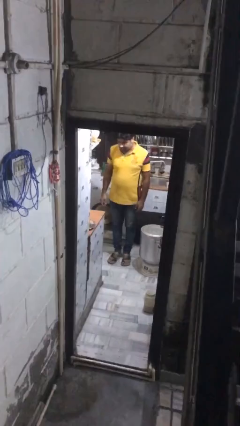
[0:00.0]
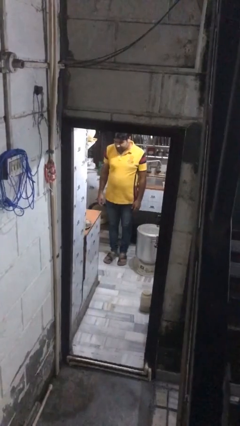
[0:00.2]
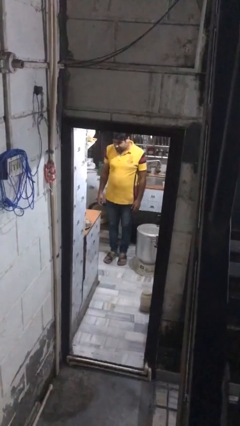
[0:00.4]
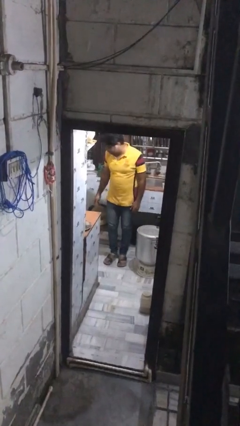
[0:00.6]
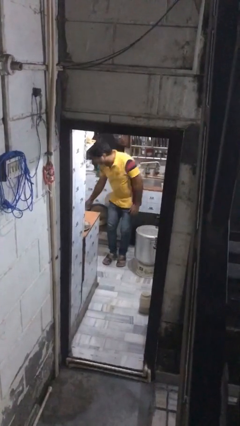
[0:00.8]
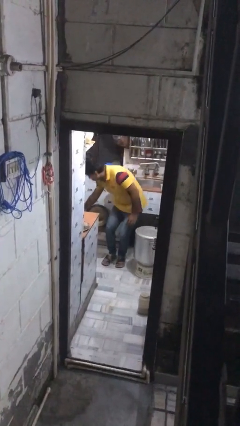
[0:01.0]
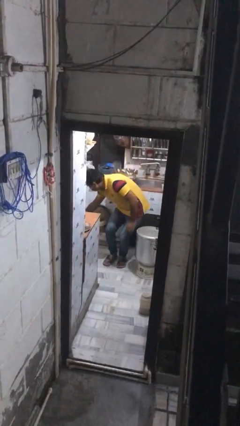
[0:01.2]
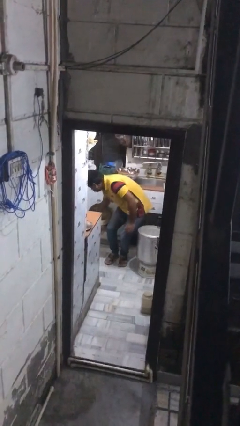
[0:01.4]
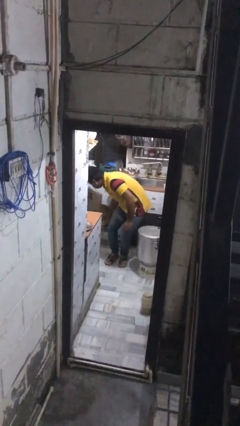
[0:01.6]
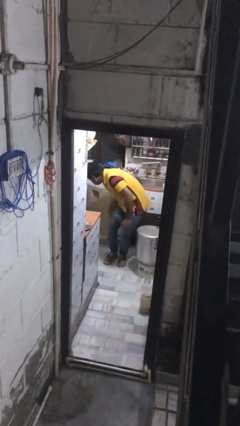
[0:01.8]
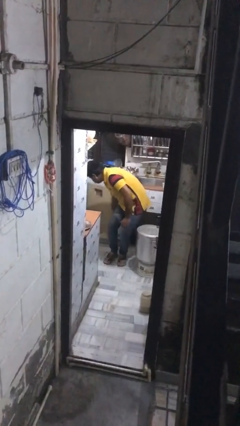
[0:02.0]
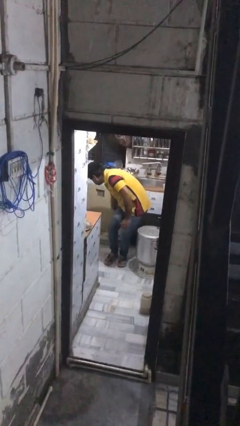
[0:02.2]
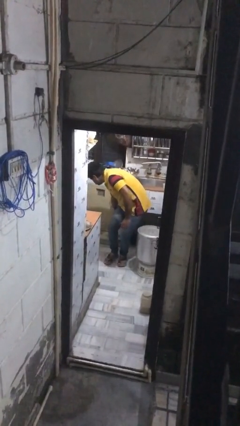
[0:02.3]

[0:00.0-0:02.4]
person opens kitchen drawer

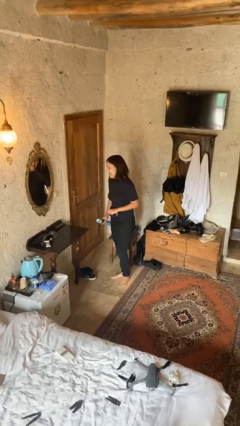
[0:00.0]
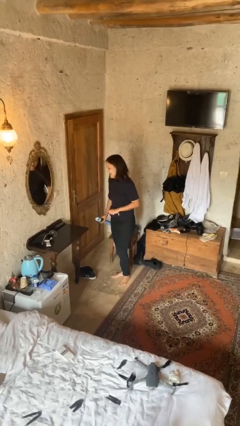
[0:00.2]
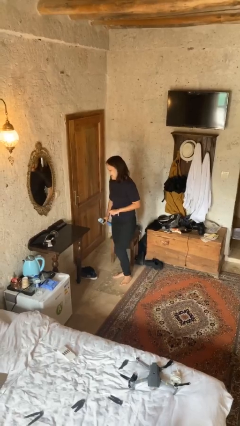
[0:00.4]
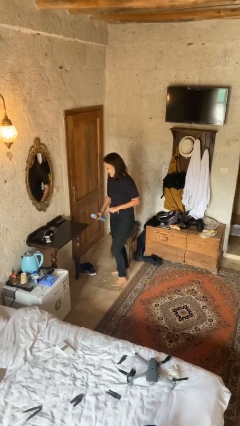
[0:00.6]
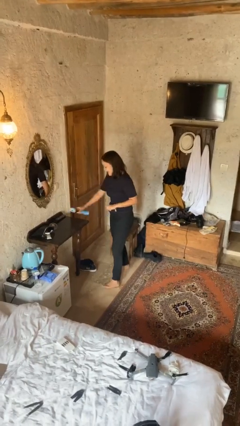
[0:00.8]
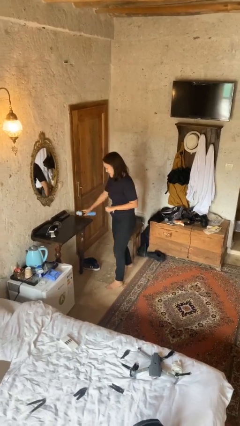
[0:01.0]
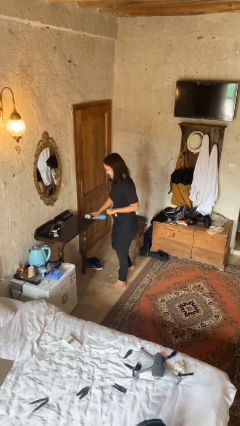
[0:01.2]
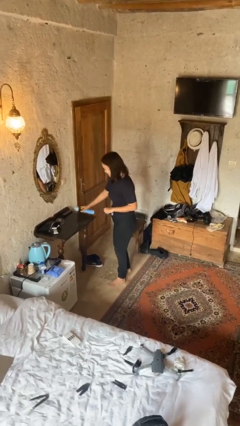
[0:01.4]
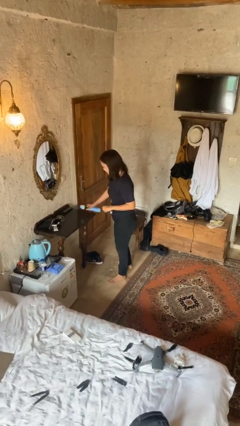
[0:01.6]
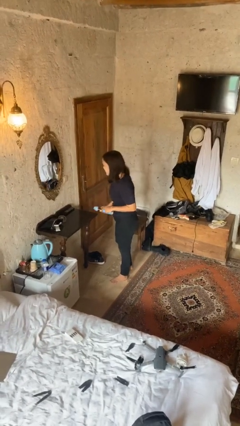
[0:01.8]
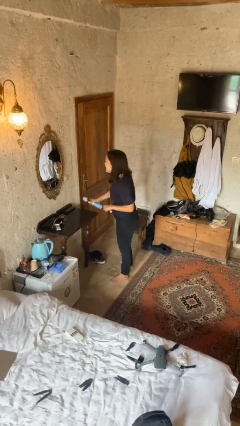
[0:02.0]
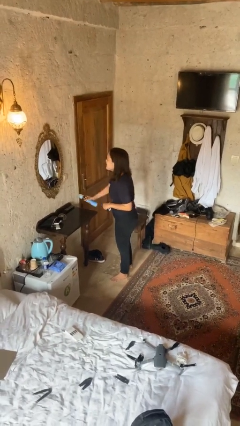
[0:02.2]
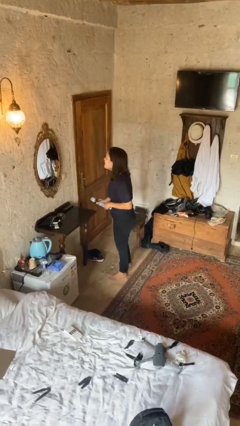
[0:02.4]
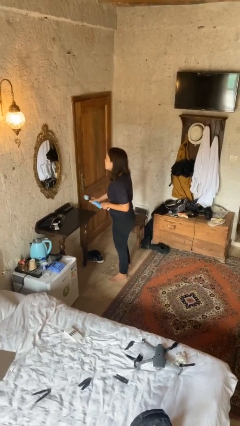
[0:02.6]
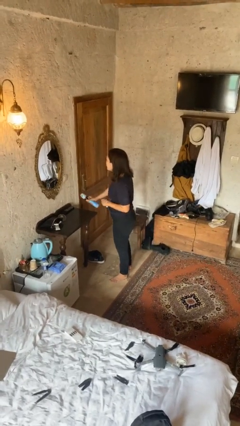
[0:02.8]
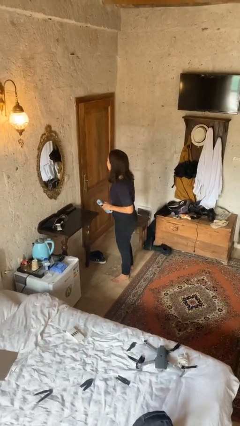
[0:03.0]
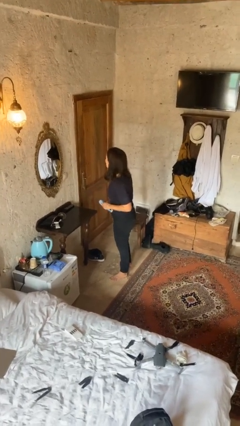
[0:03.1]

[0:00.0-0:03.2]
person sprays from bottle

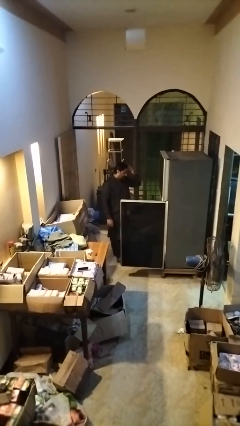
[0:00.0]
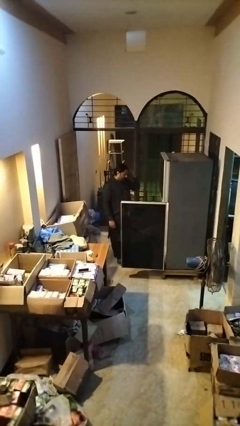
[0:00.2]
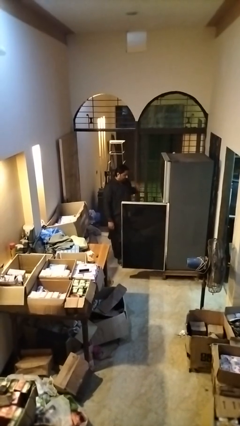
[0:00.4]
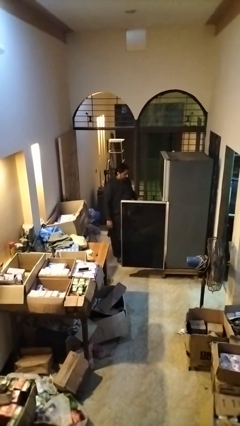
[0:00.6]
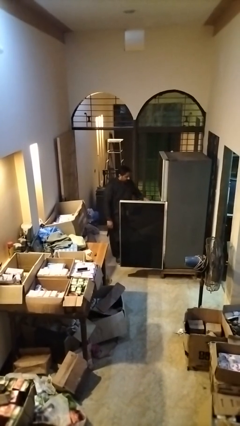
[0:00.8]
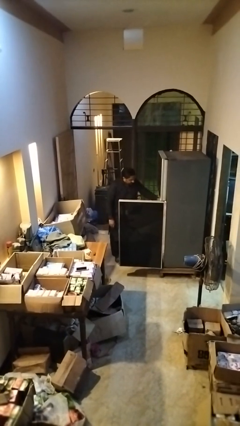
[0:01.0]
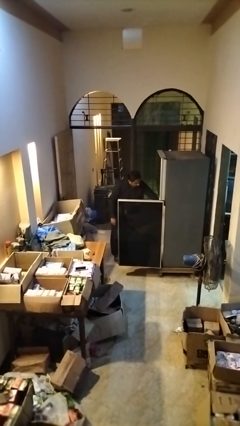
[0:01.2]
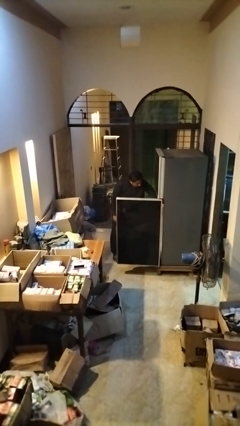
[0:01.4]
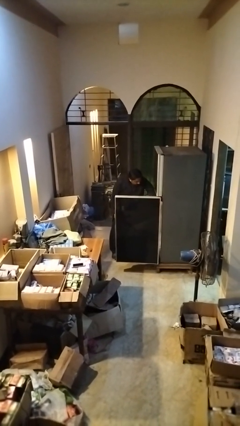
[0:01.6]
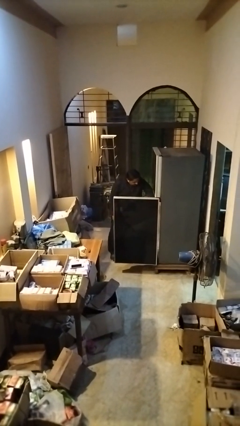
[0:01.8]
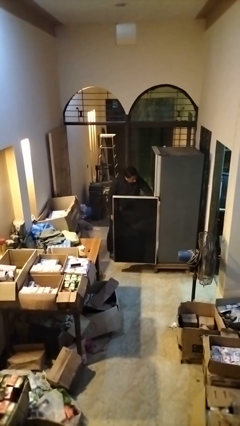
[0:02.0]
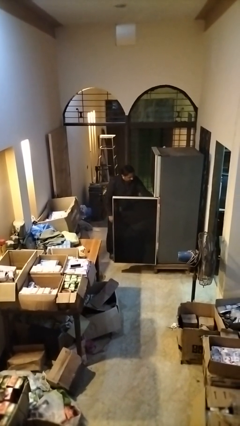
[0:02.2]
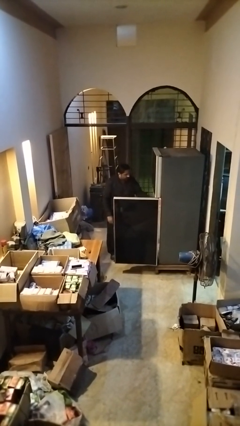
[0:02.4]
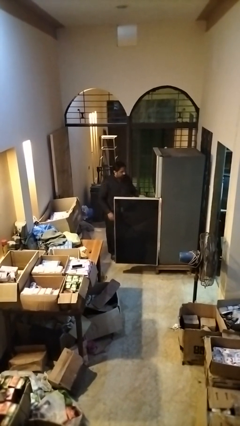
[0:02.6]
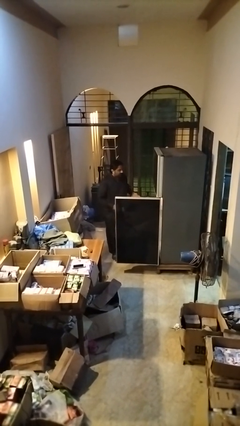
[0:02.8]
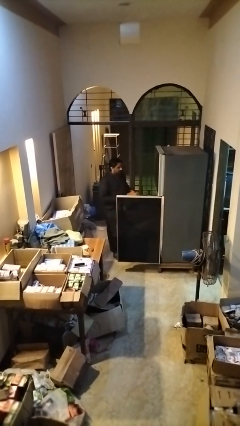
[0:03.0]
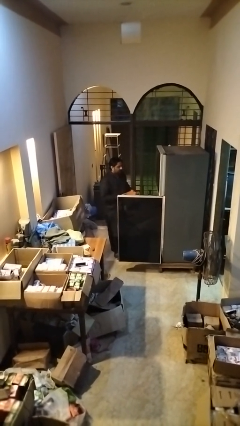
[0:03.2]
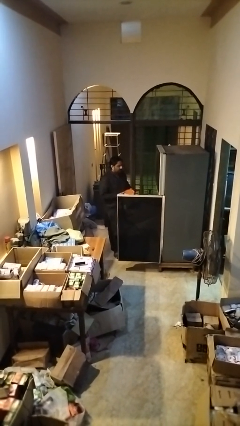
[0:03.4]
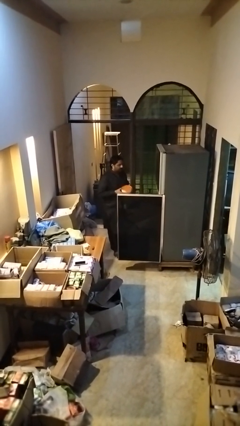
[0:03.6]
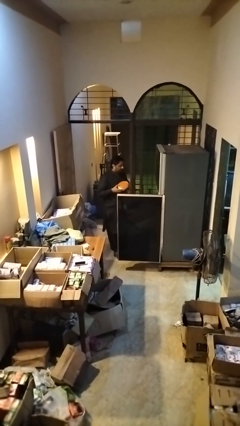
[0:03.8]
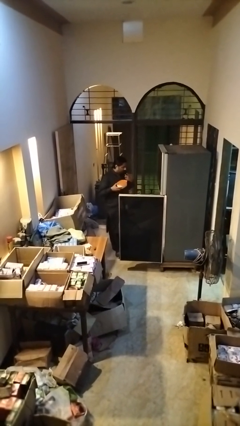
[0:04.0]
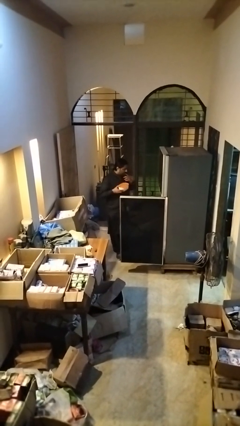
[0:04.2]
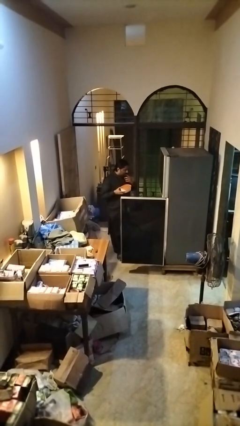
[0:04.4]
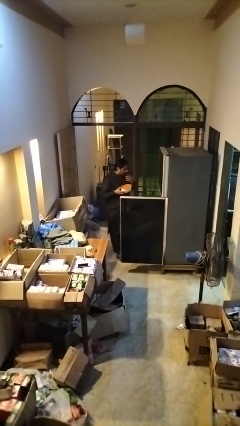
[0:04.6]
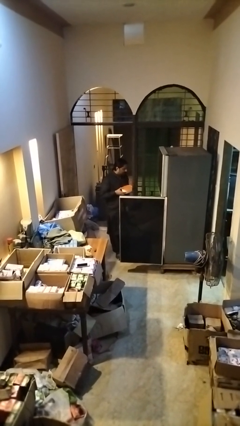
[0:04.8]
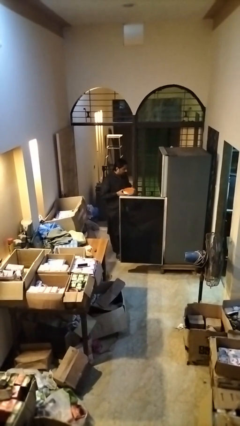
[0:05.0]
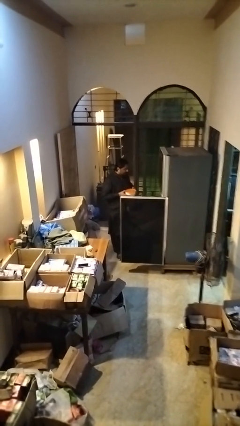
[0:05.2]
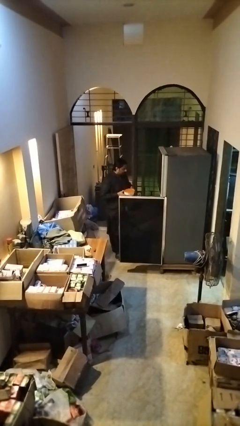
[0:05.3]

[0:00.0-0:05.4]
person puts object into refrigerator

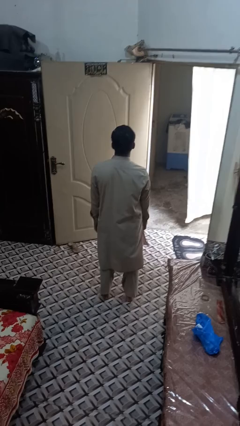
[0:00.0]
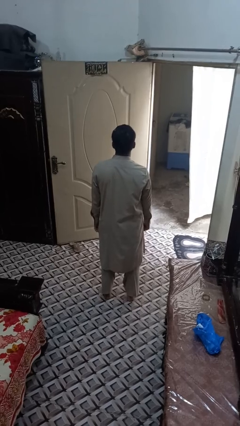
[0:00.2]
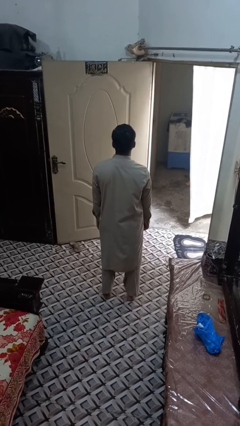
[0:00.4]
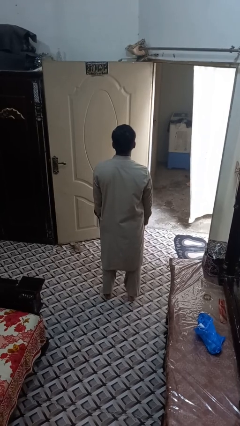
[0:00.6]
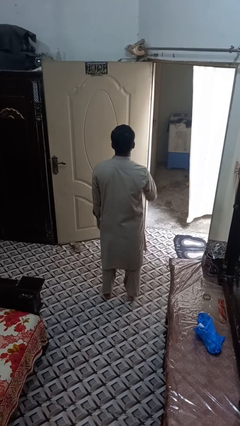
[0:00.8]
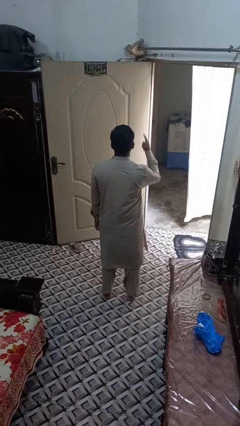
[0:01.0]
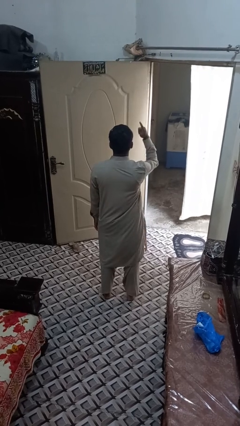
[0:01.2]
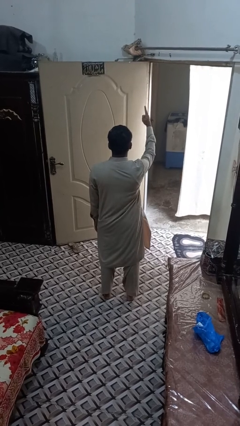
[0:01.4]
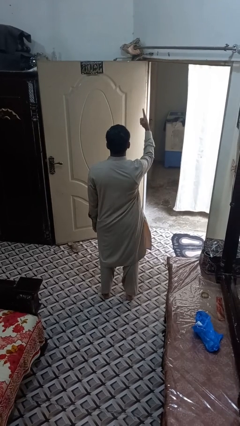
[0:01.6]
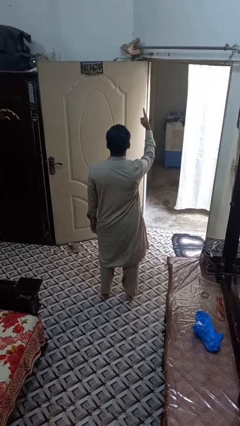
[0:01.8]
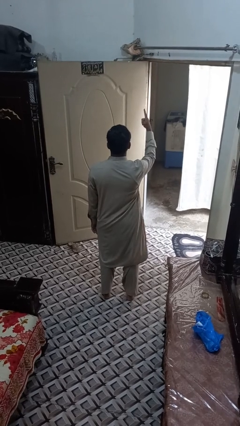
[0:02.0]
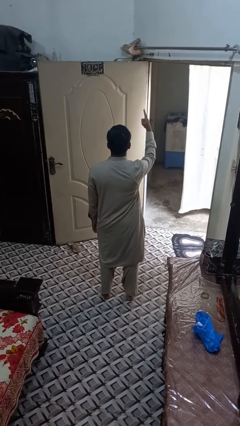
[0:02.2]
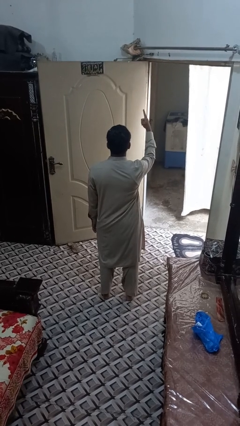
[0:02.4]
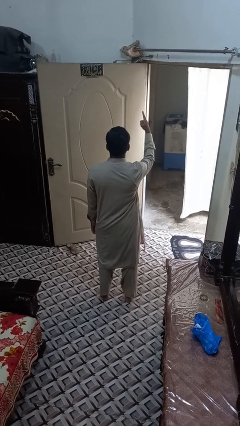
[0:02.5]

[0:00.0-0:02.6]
person gestures number one

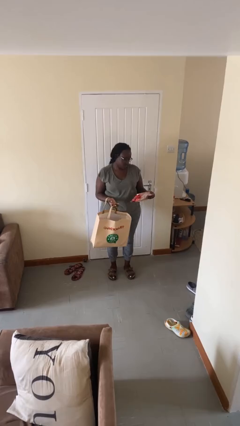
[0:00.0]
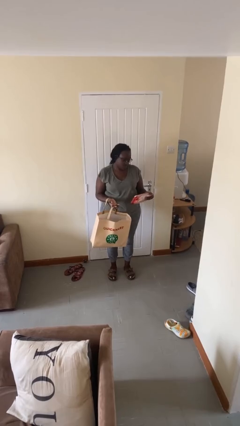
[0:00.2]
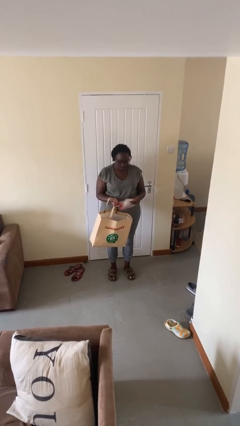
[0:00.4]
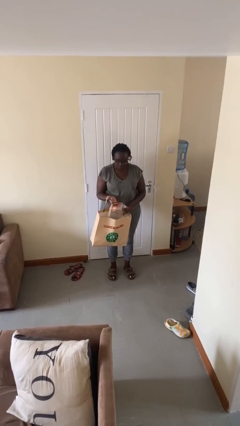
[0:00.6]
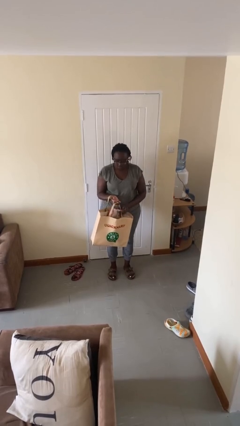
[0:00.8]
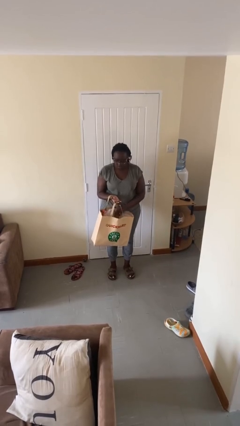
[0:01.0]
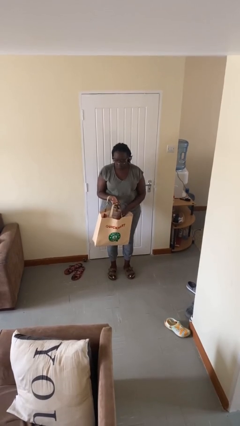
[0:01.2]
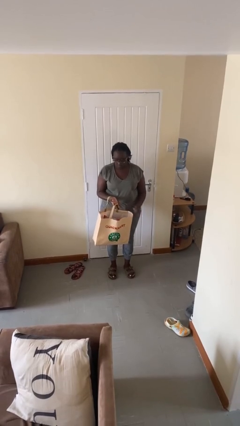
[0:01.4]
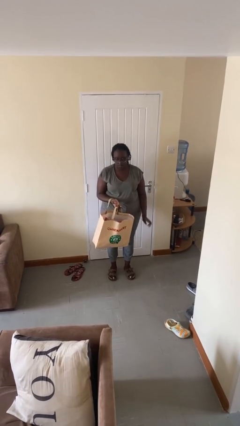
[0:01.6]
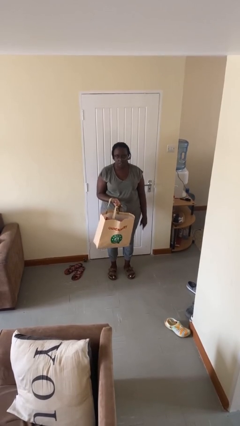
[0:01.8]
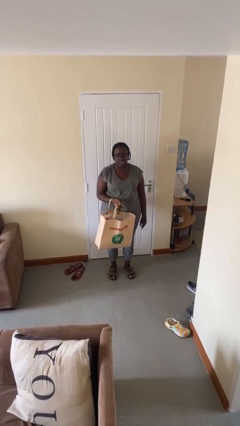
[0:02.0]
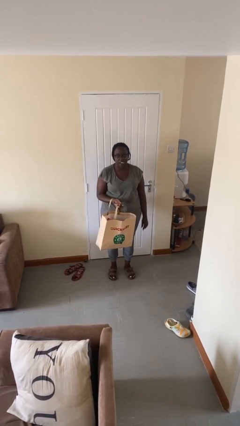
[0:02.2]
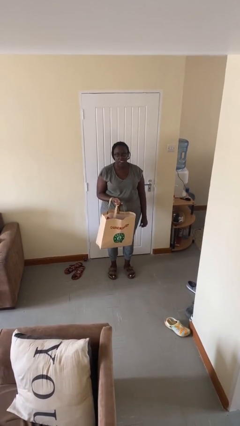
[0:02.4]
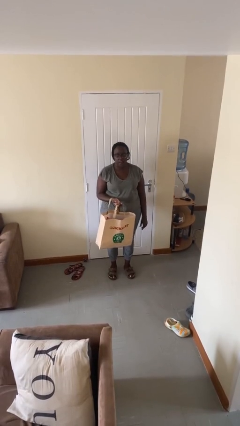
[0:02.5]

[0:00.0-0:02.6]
person puts object into bag

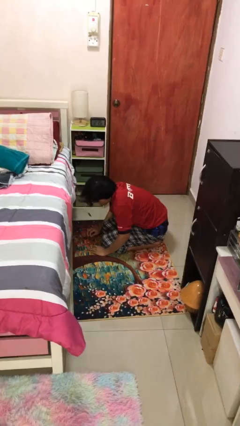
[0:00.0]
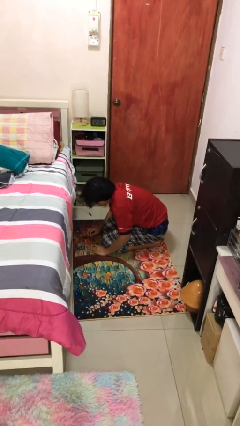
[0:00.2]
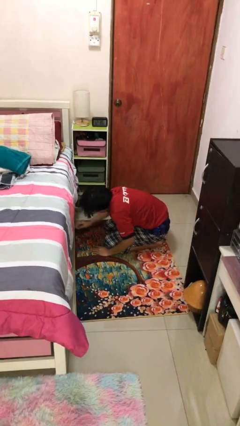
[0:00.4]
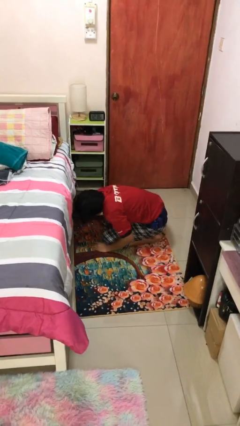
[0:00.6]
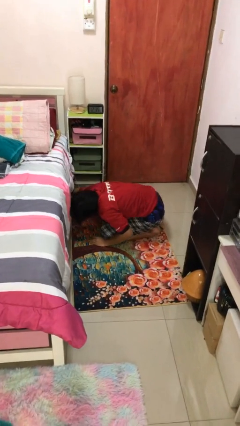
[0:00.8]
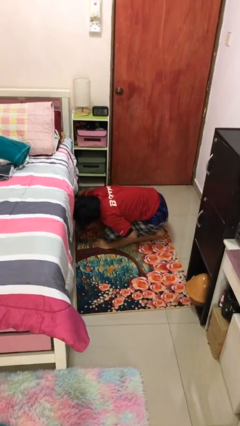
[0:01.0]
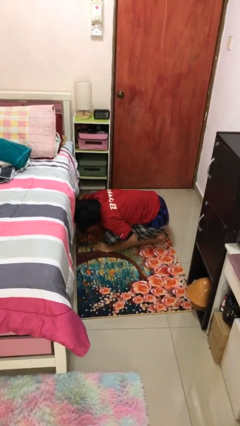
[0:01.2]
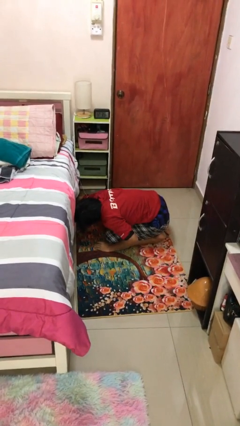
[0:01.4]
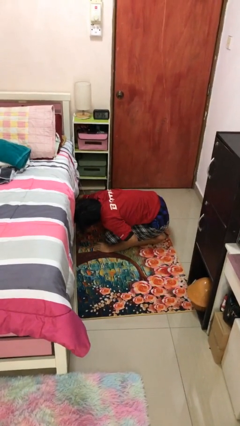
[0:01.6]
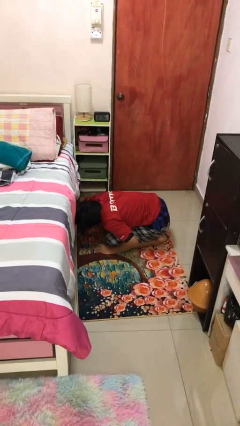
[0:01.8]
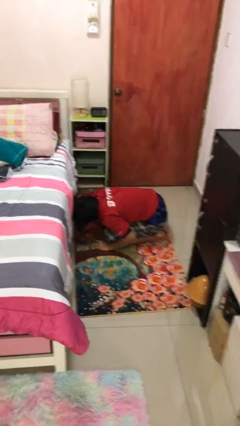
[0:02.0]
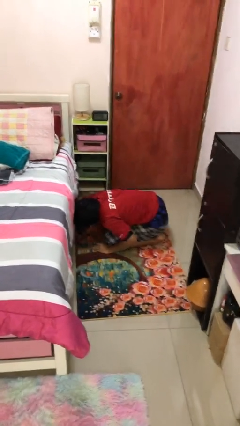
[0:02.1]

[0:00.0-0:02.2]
person searches under bed
